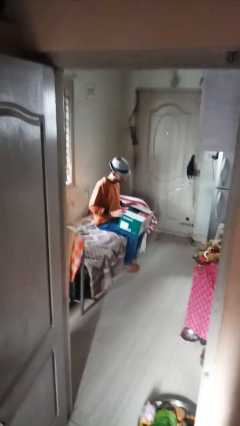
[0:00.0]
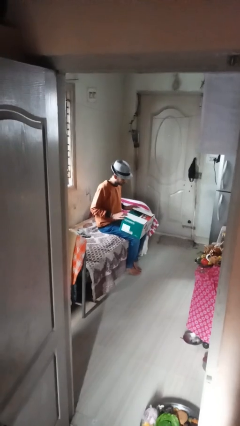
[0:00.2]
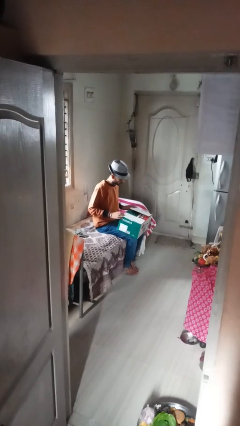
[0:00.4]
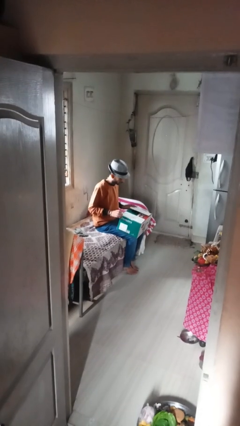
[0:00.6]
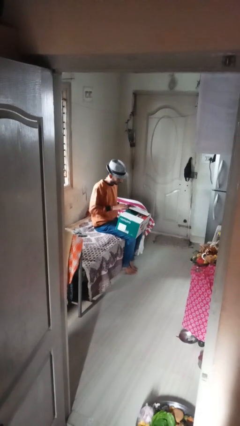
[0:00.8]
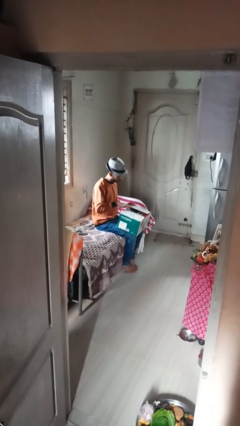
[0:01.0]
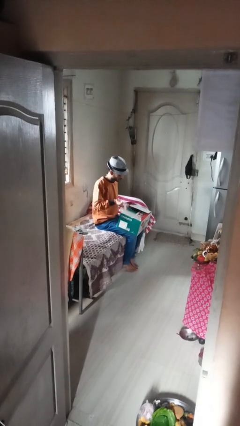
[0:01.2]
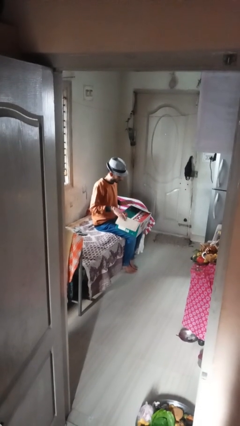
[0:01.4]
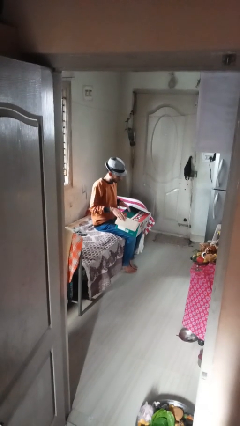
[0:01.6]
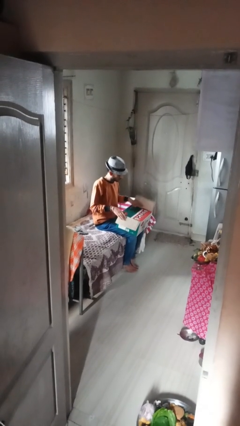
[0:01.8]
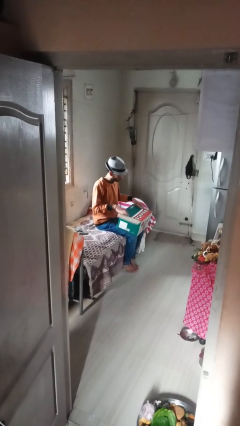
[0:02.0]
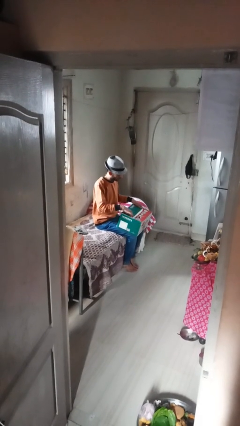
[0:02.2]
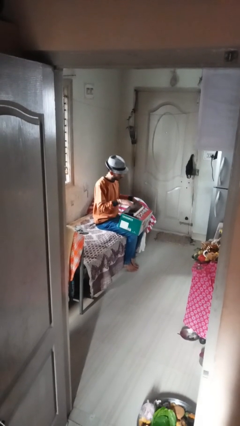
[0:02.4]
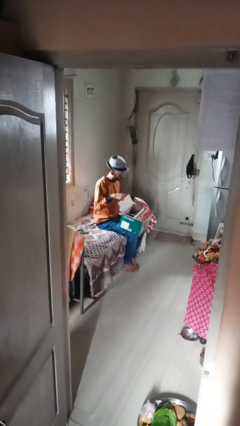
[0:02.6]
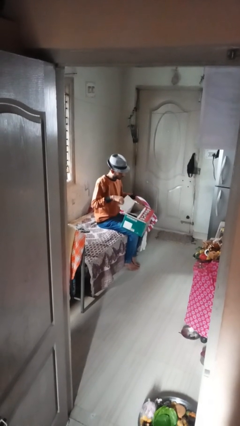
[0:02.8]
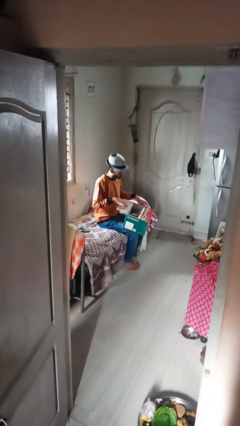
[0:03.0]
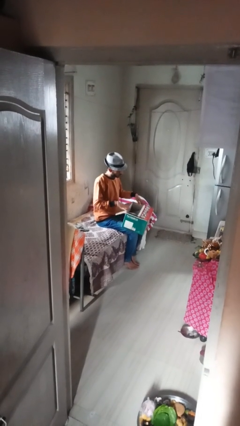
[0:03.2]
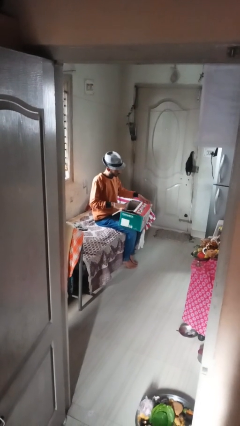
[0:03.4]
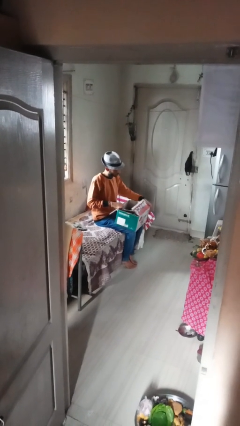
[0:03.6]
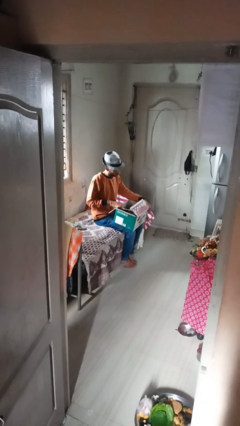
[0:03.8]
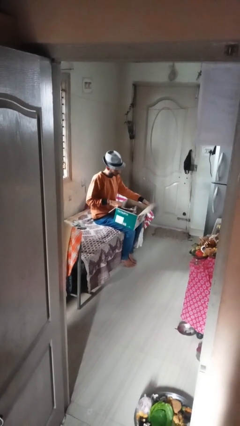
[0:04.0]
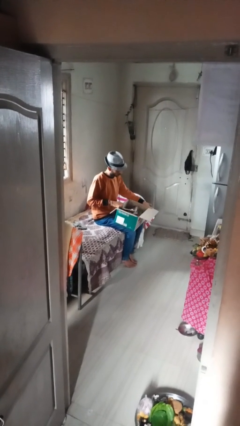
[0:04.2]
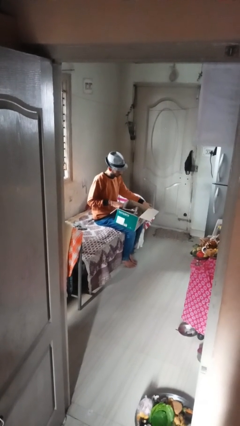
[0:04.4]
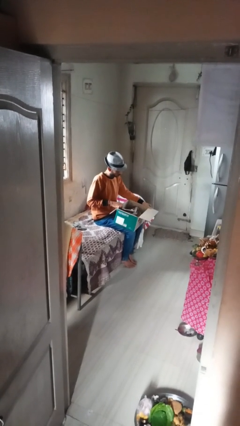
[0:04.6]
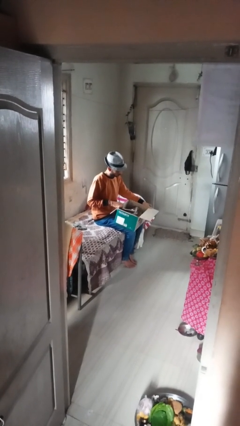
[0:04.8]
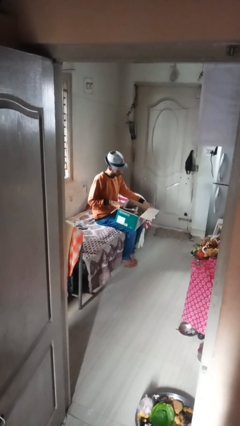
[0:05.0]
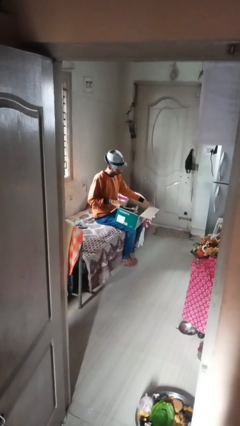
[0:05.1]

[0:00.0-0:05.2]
person opens box

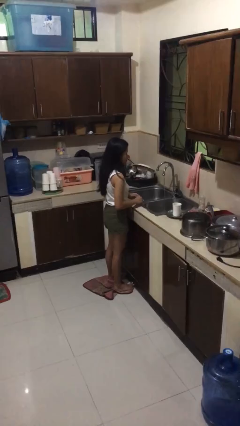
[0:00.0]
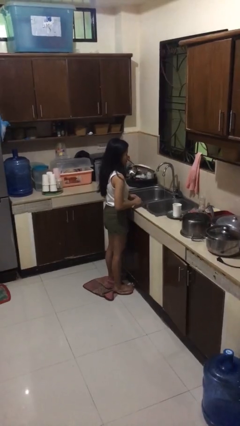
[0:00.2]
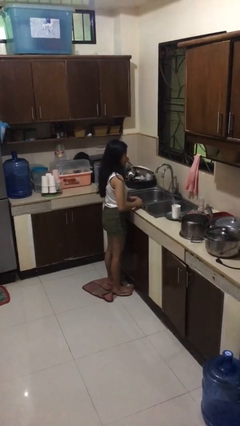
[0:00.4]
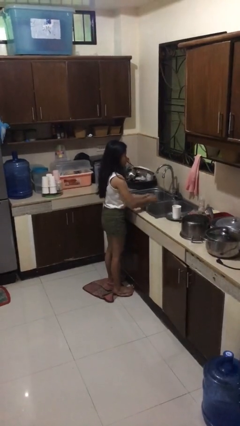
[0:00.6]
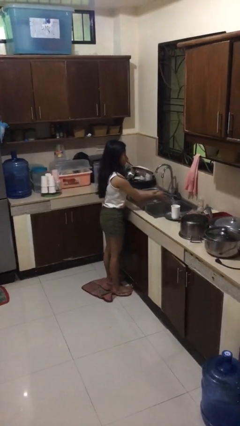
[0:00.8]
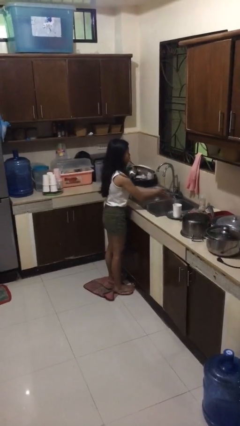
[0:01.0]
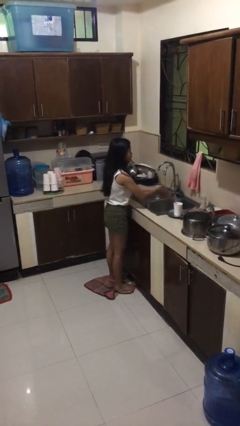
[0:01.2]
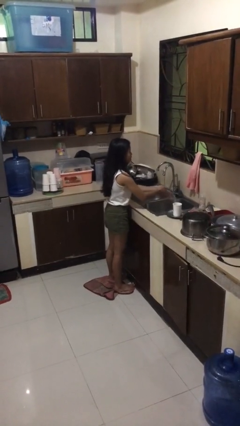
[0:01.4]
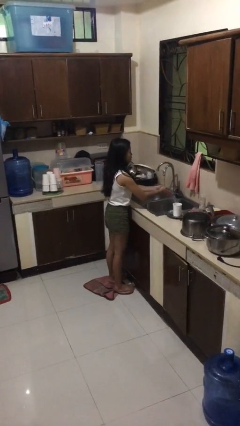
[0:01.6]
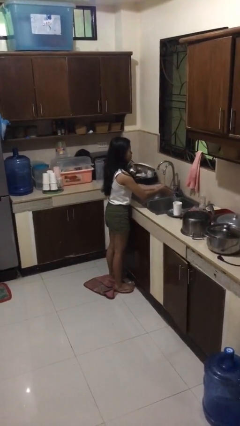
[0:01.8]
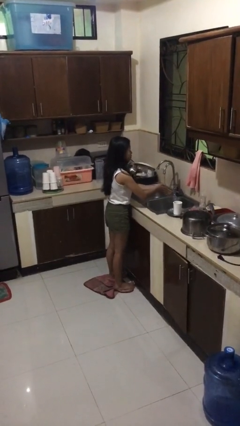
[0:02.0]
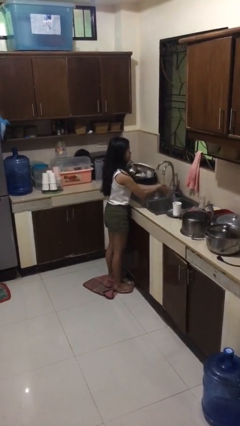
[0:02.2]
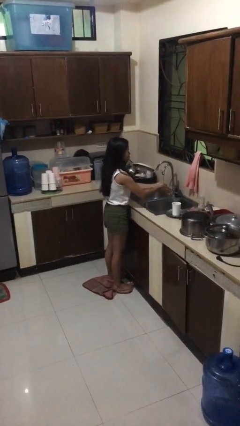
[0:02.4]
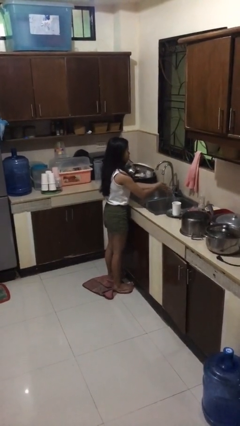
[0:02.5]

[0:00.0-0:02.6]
person washes hands

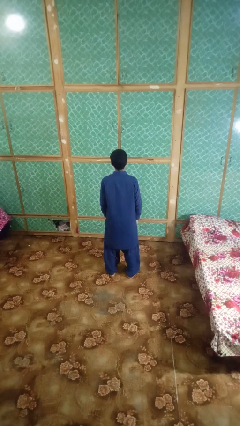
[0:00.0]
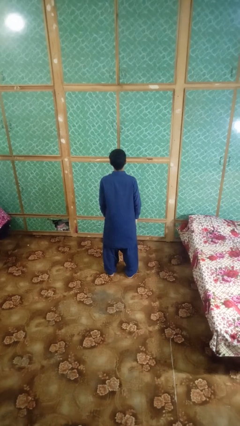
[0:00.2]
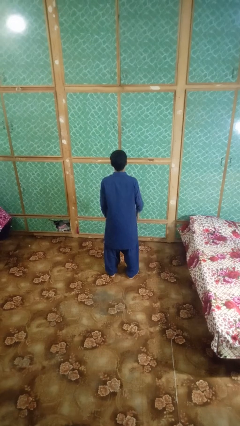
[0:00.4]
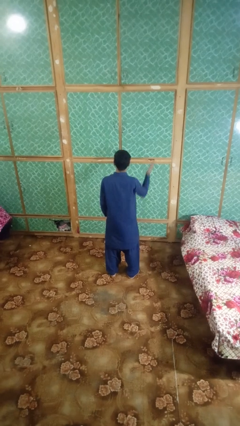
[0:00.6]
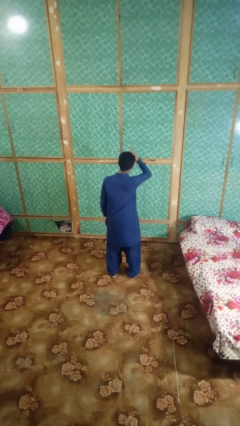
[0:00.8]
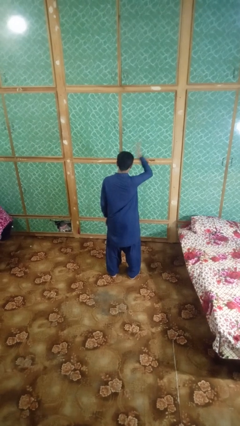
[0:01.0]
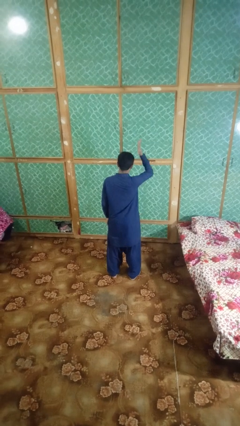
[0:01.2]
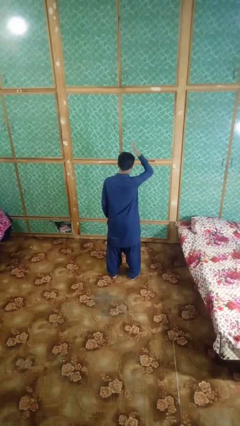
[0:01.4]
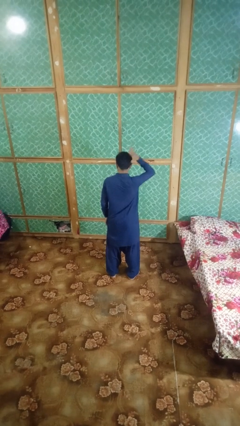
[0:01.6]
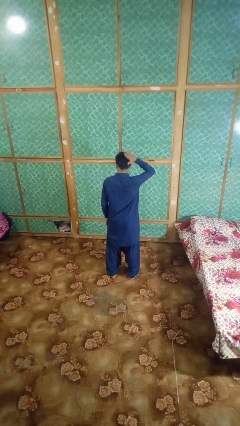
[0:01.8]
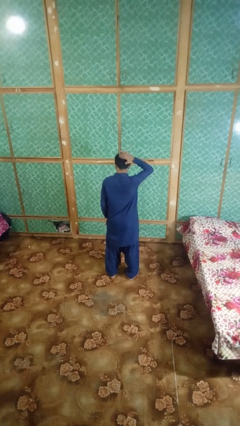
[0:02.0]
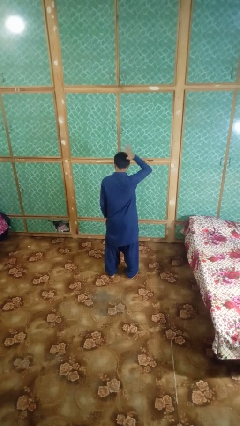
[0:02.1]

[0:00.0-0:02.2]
person pats head

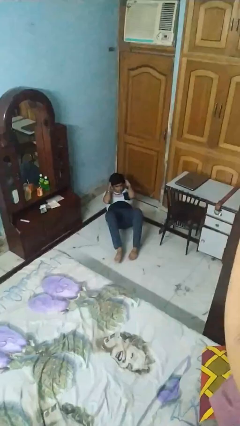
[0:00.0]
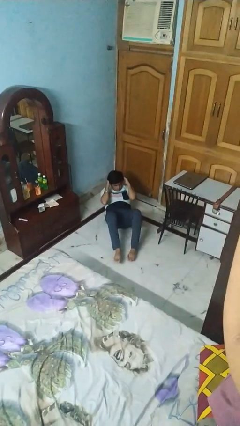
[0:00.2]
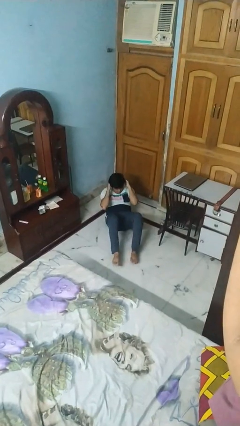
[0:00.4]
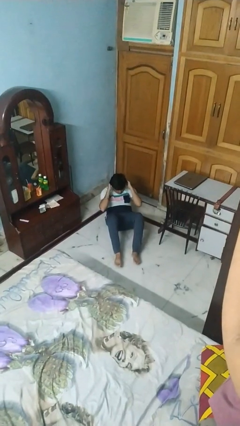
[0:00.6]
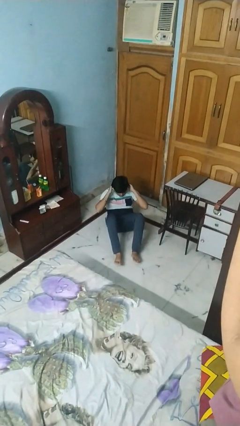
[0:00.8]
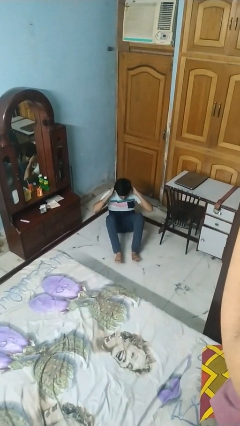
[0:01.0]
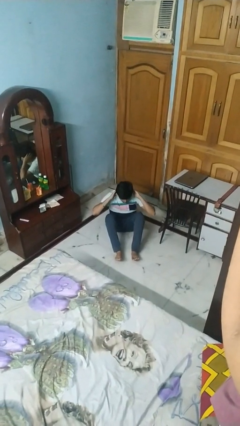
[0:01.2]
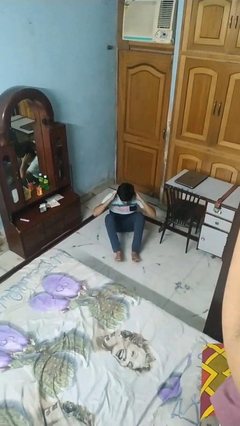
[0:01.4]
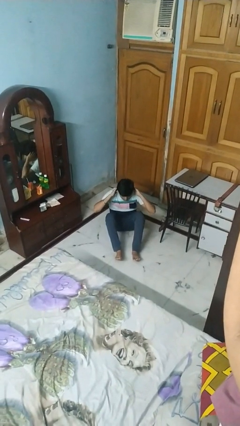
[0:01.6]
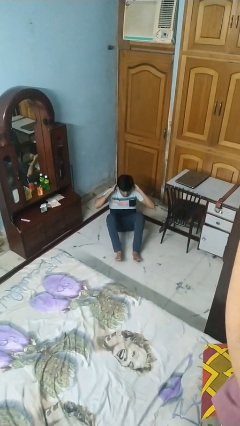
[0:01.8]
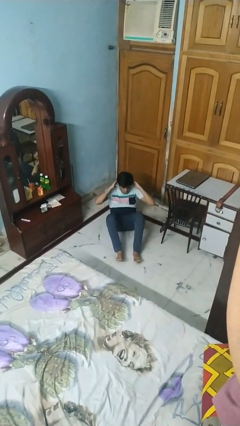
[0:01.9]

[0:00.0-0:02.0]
person exercises with situp

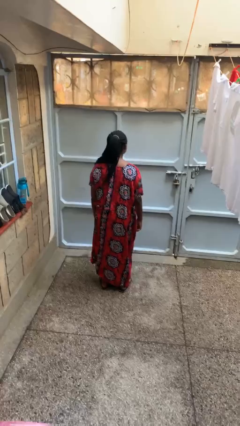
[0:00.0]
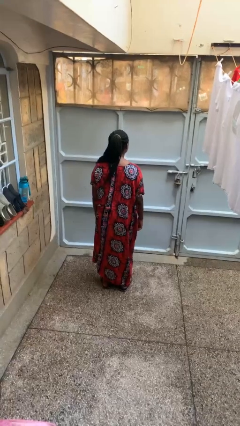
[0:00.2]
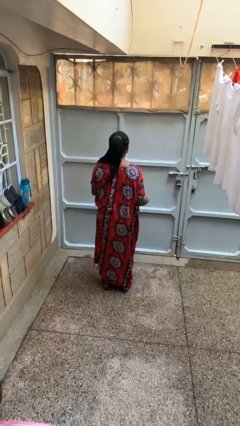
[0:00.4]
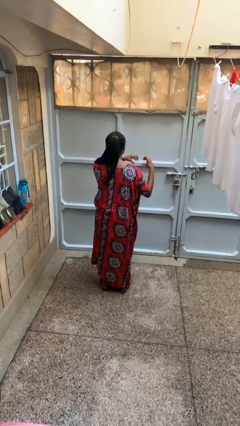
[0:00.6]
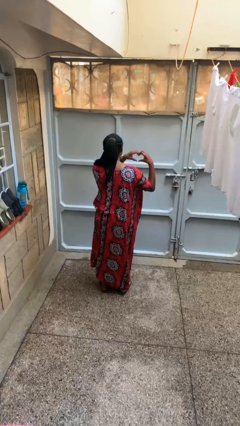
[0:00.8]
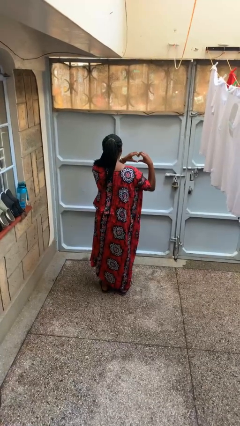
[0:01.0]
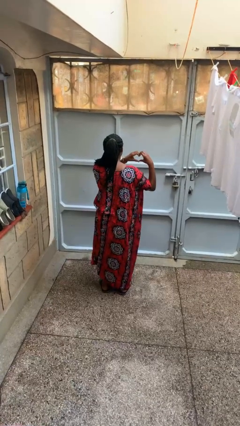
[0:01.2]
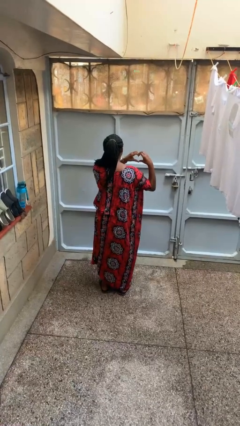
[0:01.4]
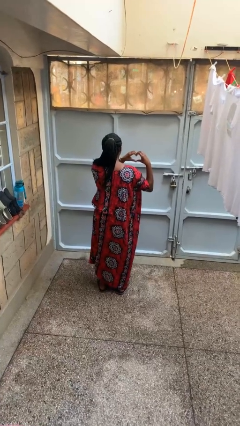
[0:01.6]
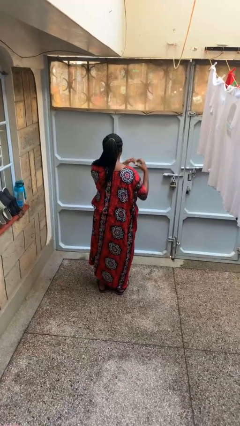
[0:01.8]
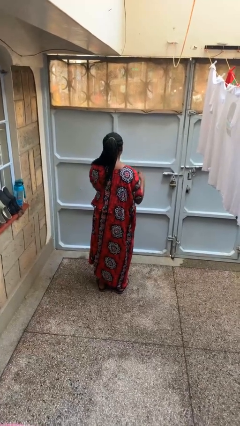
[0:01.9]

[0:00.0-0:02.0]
person gestures heart

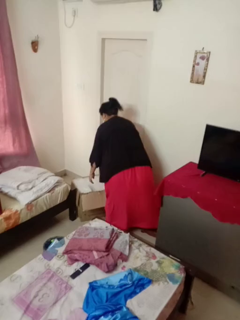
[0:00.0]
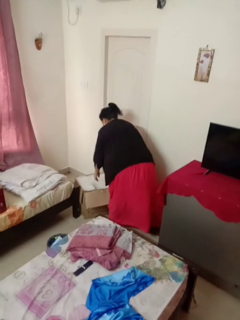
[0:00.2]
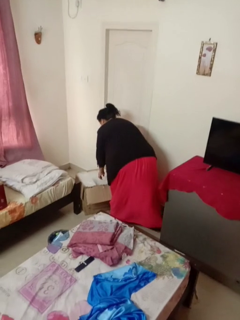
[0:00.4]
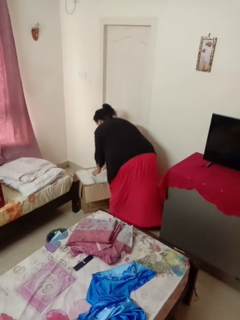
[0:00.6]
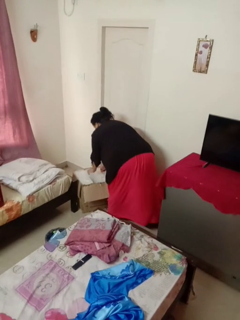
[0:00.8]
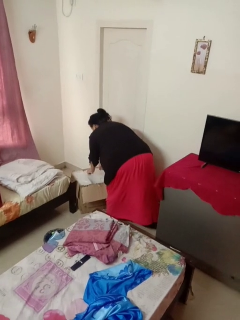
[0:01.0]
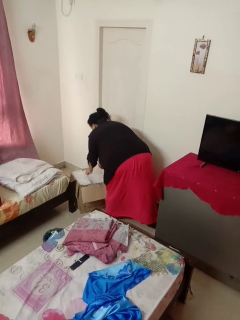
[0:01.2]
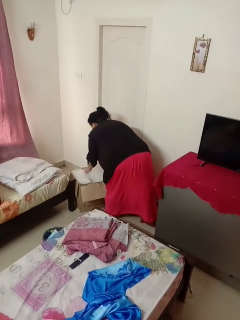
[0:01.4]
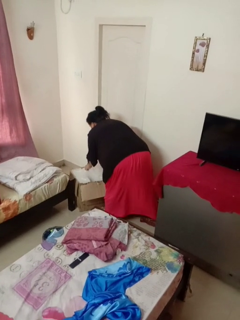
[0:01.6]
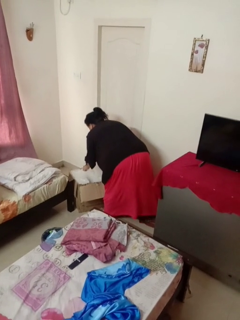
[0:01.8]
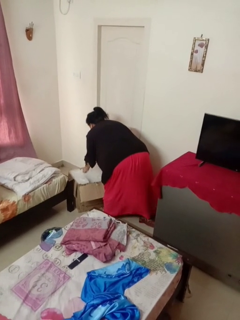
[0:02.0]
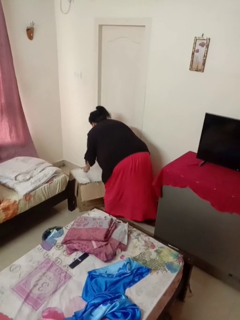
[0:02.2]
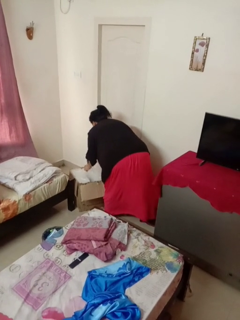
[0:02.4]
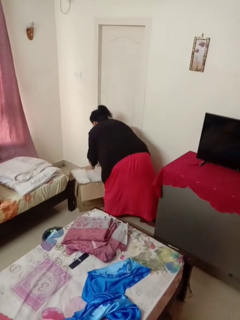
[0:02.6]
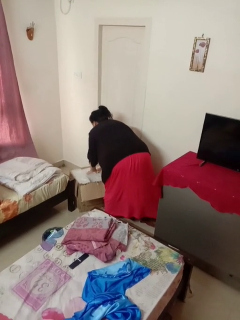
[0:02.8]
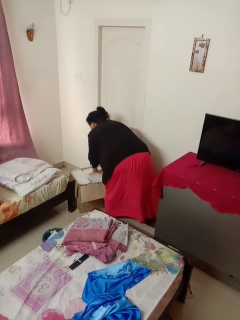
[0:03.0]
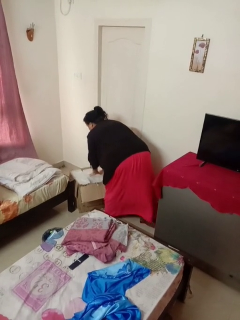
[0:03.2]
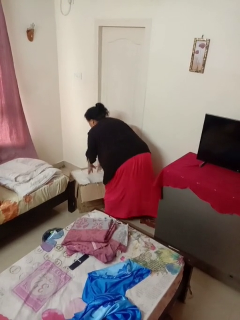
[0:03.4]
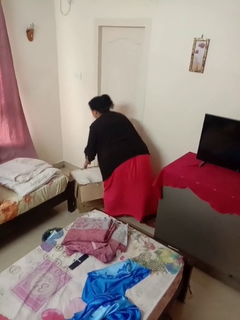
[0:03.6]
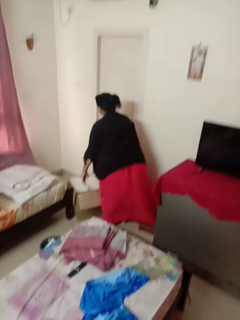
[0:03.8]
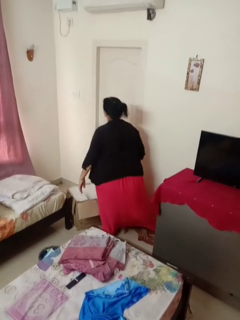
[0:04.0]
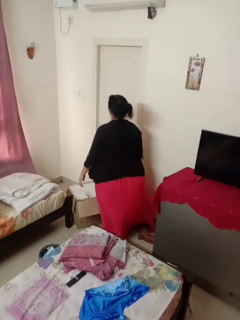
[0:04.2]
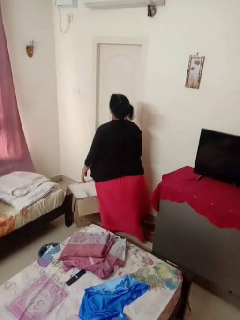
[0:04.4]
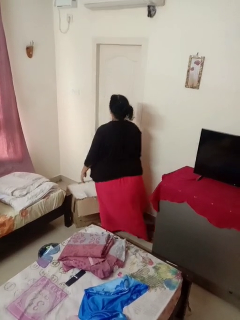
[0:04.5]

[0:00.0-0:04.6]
person searches in box
